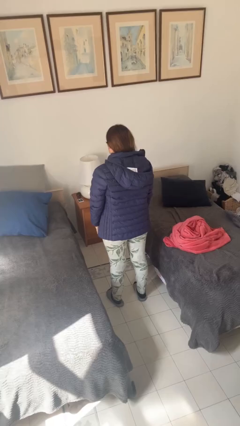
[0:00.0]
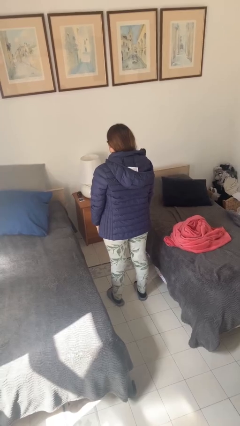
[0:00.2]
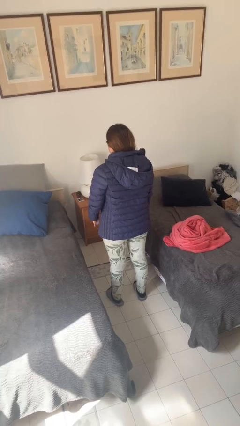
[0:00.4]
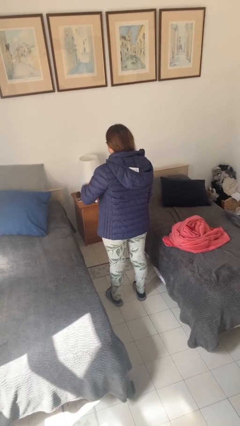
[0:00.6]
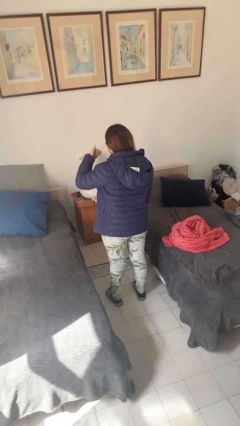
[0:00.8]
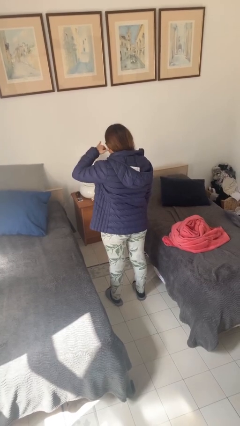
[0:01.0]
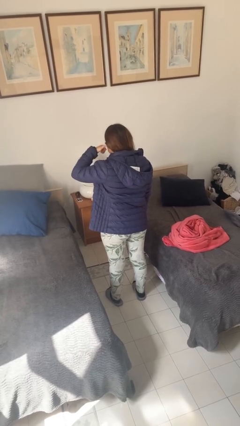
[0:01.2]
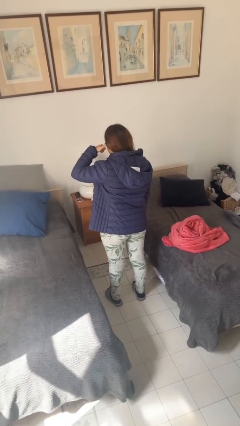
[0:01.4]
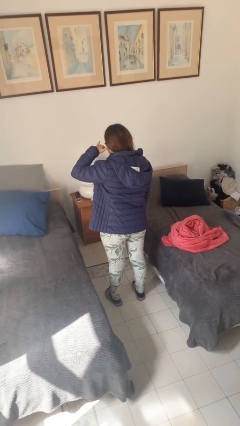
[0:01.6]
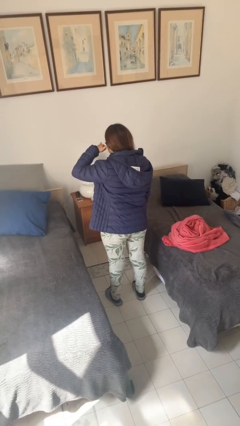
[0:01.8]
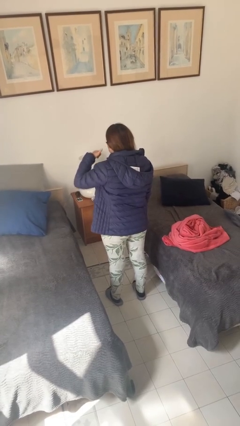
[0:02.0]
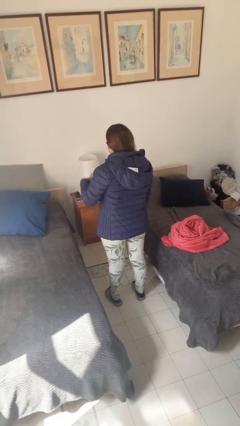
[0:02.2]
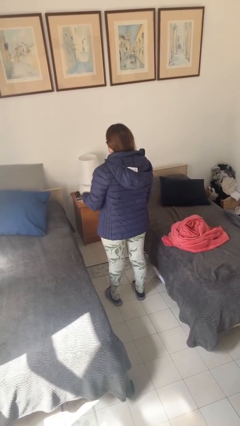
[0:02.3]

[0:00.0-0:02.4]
person gestures call me

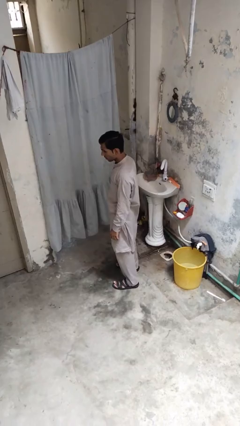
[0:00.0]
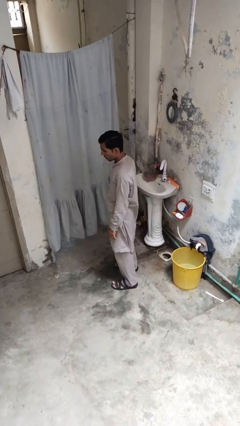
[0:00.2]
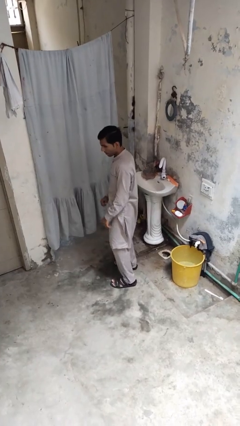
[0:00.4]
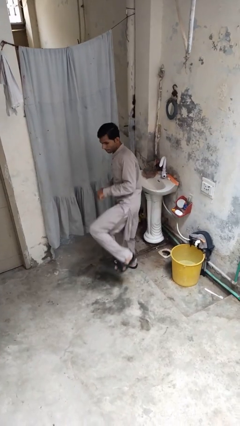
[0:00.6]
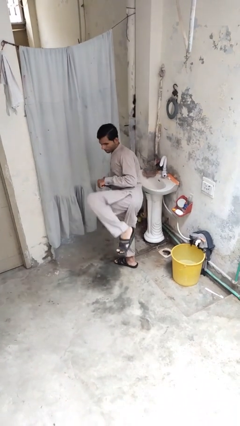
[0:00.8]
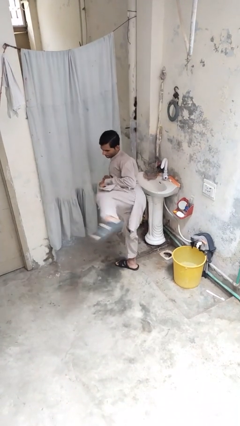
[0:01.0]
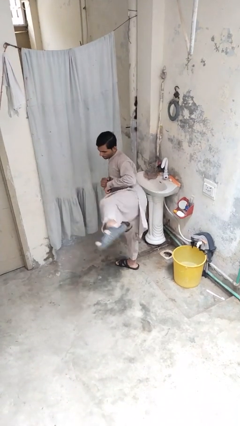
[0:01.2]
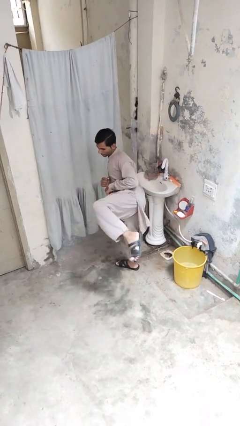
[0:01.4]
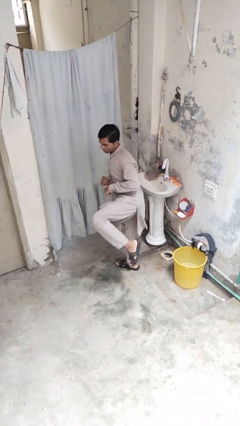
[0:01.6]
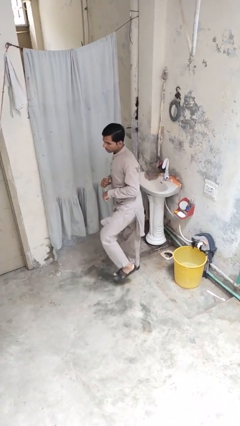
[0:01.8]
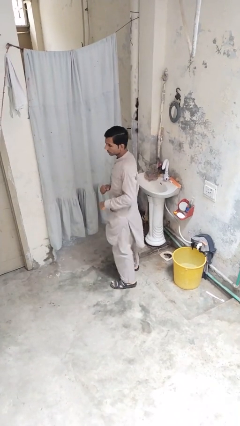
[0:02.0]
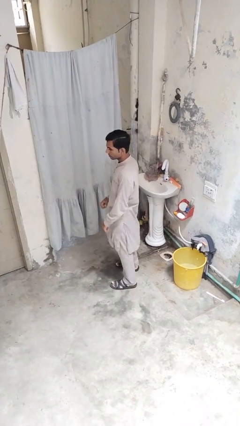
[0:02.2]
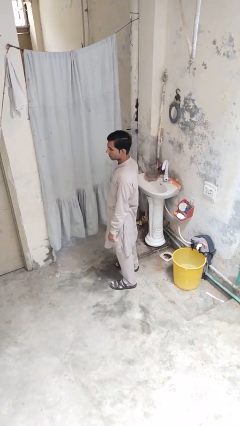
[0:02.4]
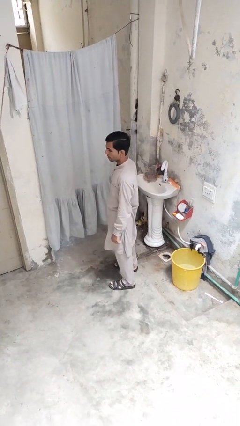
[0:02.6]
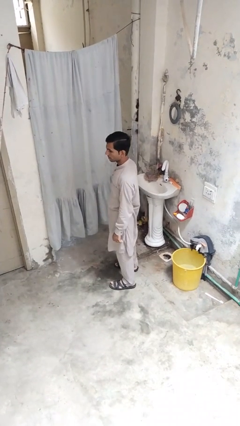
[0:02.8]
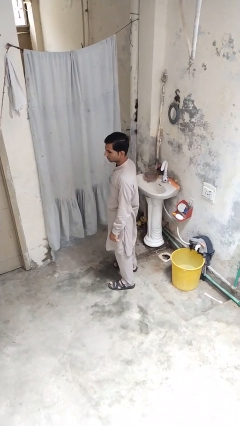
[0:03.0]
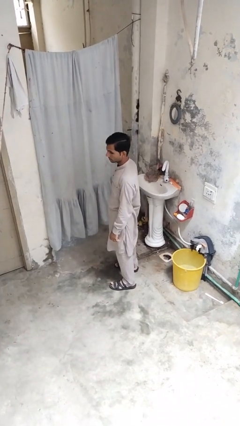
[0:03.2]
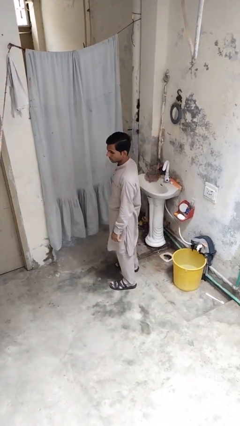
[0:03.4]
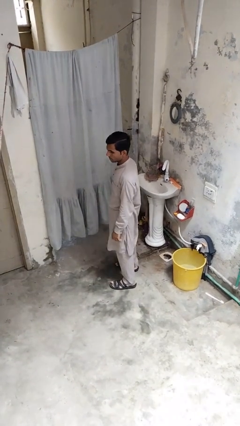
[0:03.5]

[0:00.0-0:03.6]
person karate kicks

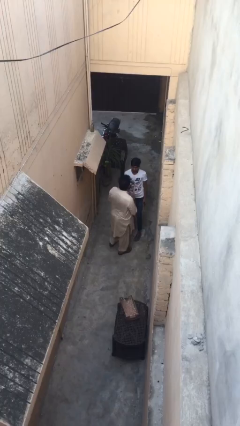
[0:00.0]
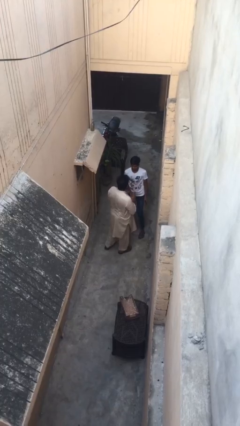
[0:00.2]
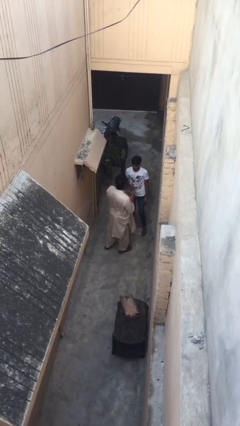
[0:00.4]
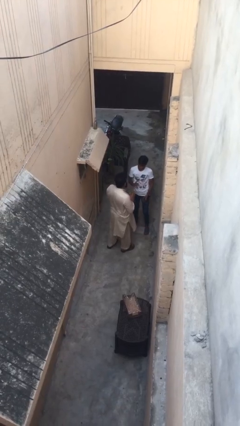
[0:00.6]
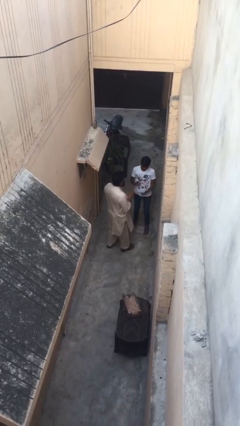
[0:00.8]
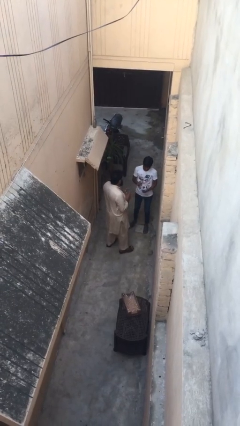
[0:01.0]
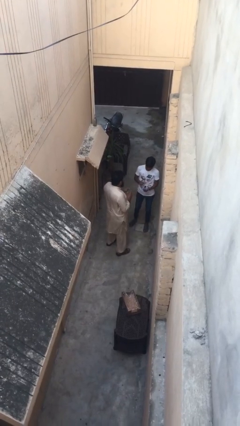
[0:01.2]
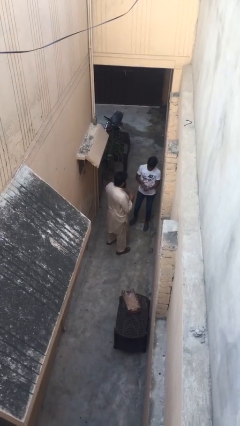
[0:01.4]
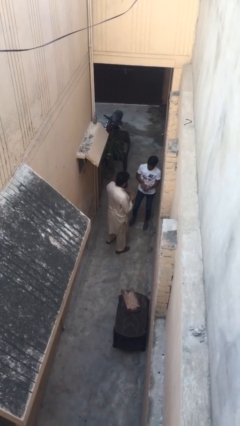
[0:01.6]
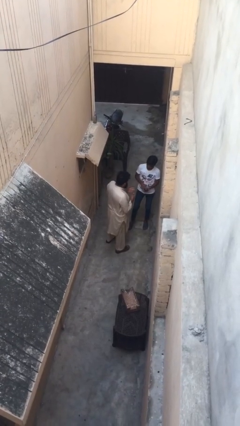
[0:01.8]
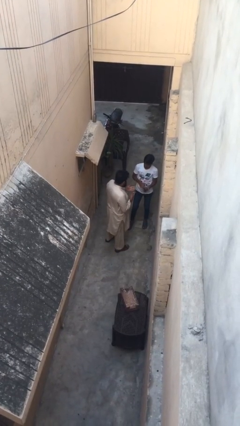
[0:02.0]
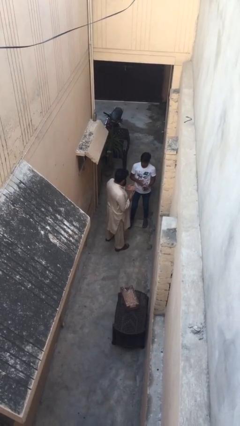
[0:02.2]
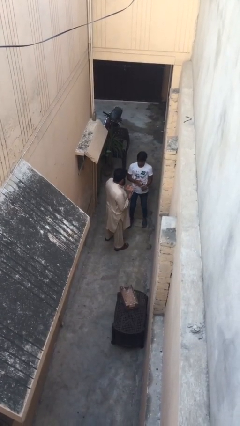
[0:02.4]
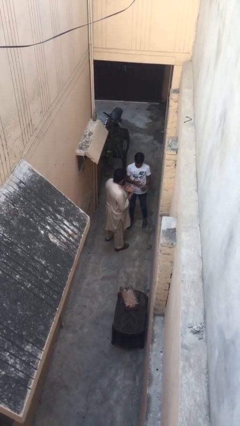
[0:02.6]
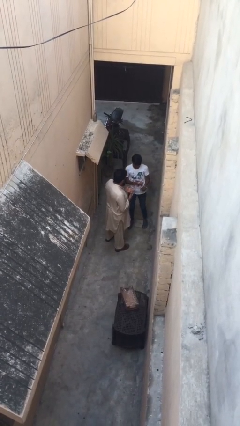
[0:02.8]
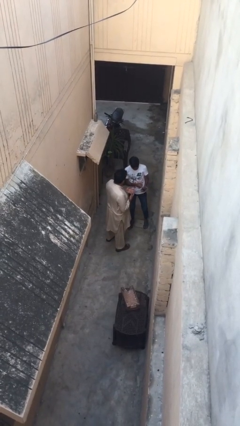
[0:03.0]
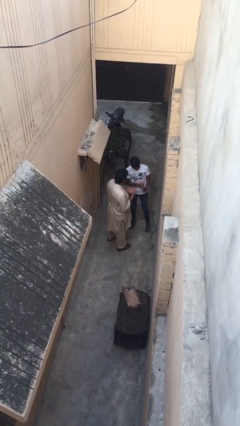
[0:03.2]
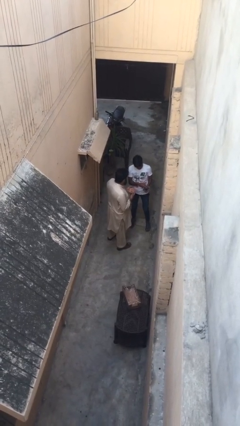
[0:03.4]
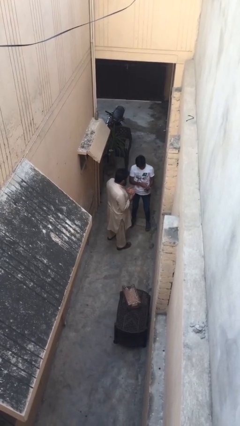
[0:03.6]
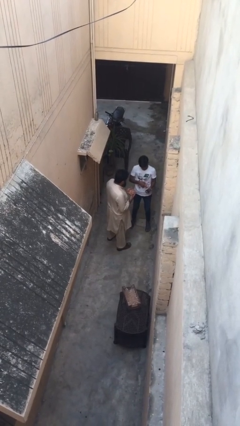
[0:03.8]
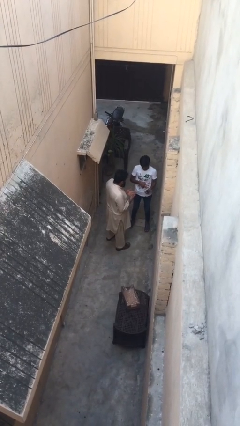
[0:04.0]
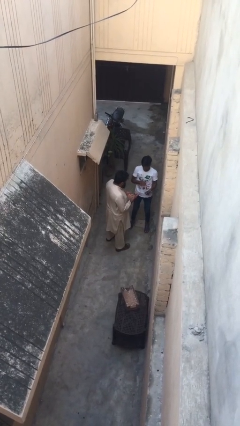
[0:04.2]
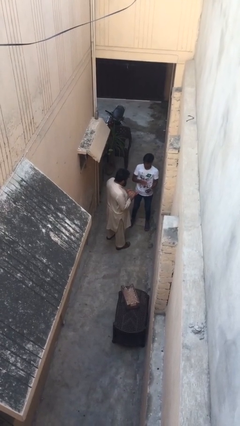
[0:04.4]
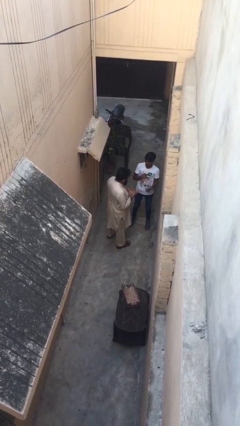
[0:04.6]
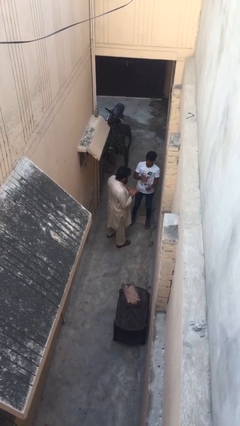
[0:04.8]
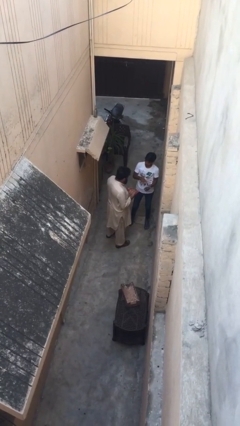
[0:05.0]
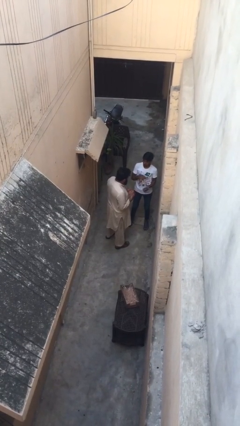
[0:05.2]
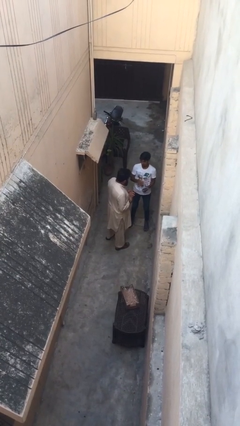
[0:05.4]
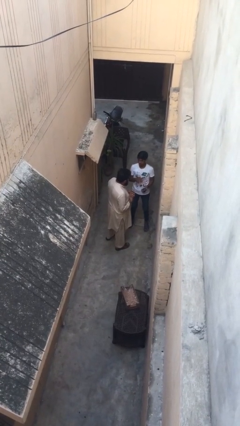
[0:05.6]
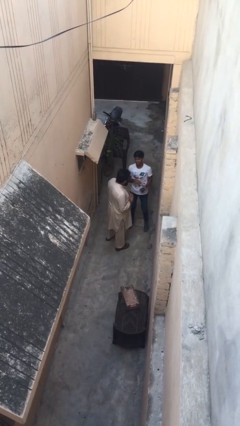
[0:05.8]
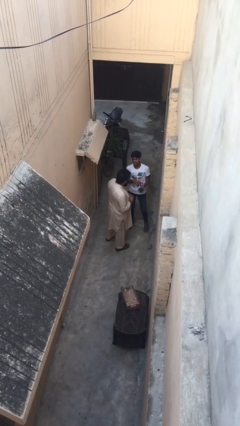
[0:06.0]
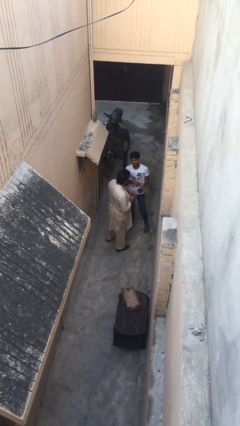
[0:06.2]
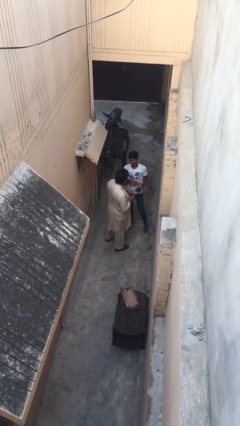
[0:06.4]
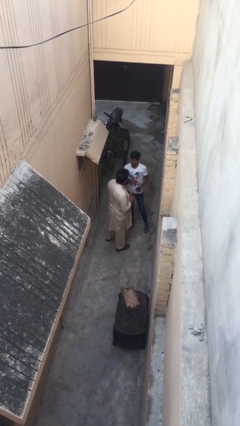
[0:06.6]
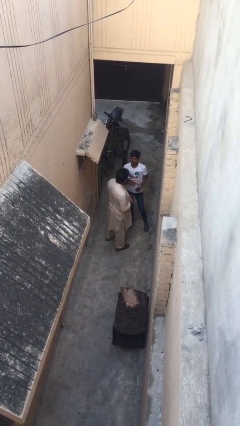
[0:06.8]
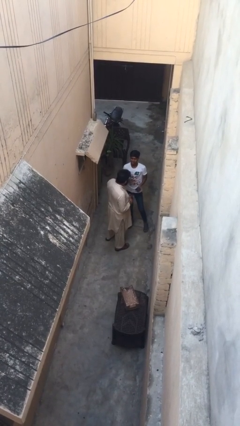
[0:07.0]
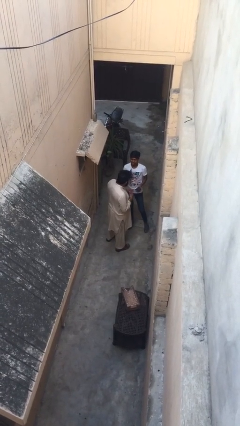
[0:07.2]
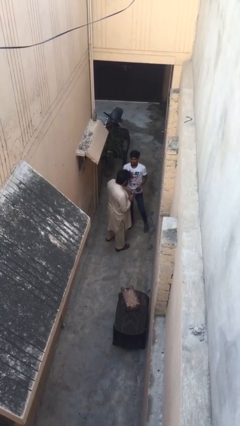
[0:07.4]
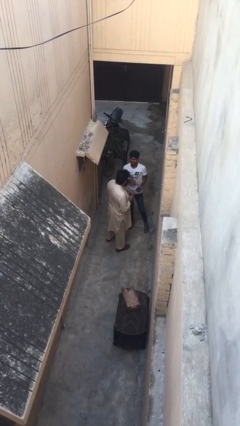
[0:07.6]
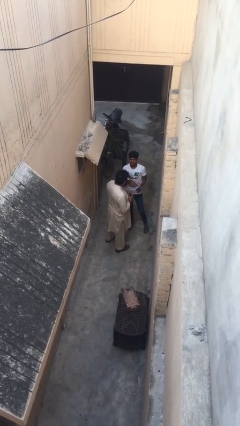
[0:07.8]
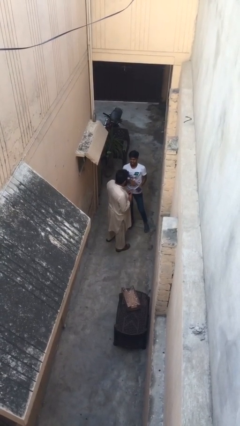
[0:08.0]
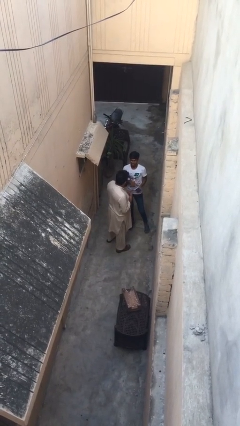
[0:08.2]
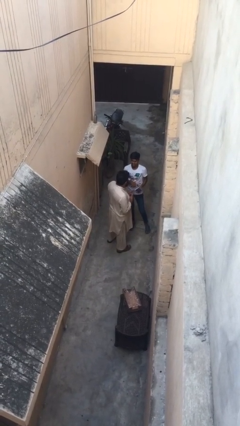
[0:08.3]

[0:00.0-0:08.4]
person talks to person

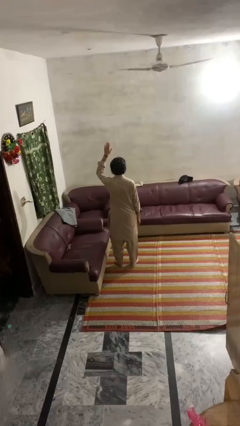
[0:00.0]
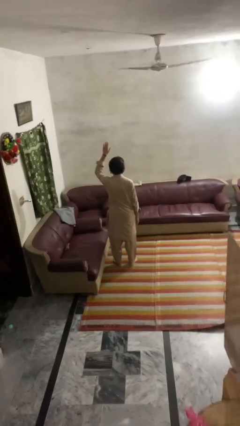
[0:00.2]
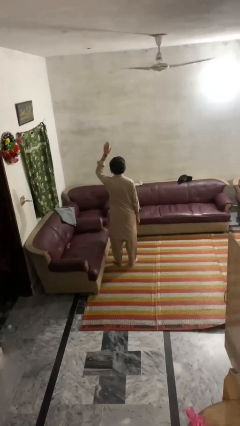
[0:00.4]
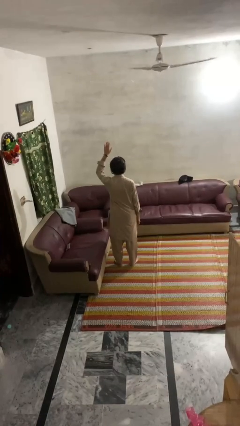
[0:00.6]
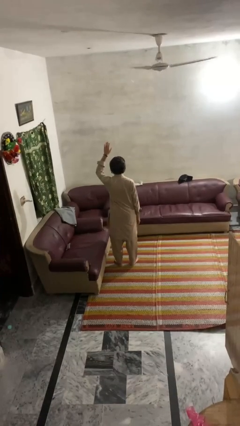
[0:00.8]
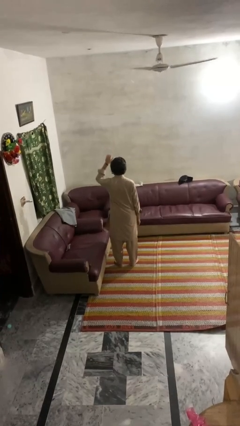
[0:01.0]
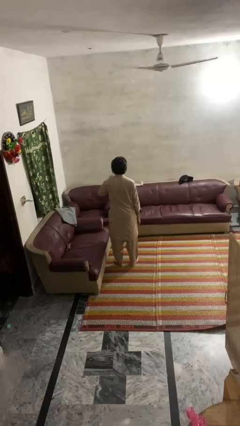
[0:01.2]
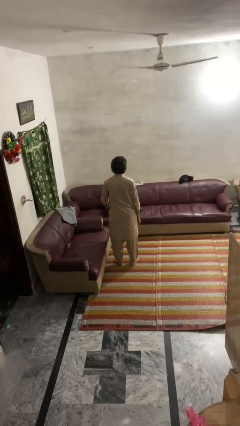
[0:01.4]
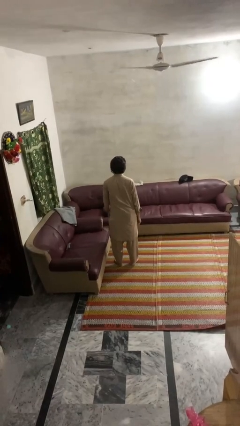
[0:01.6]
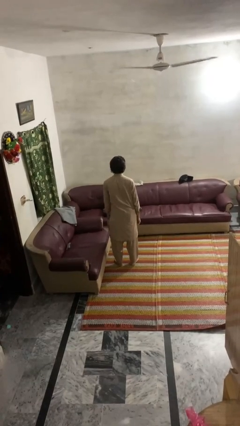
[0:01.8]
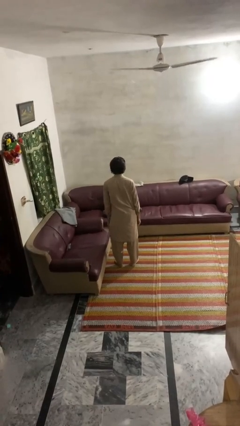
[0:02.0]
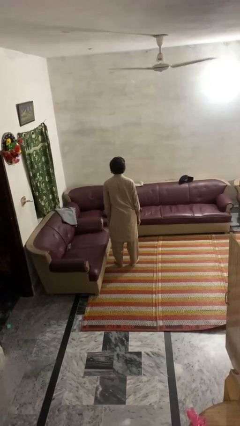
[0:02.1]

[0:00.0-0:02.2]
person gestures lower hand

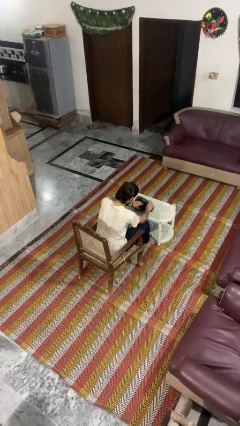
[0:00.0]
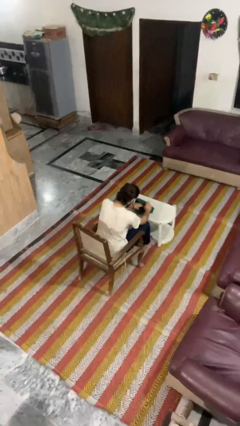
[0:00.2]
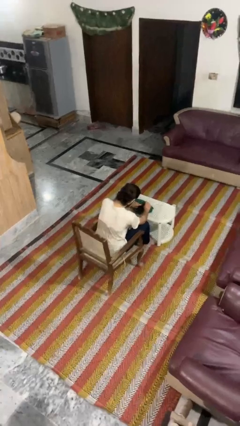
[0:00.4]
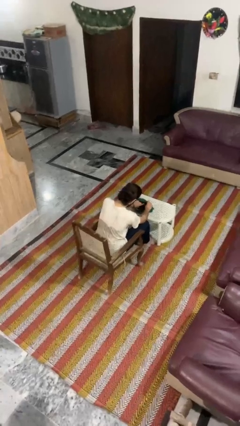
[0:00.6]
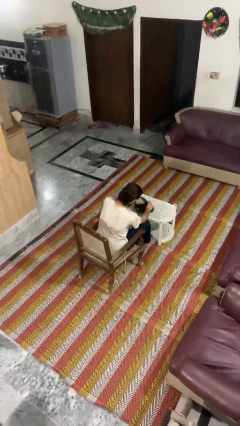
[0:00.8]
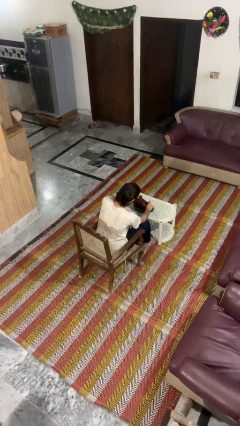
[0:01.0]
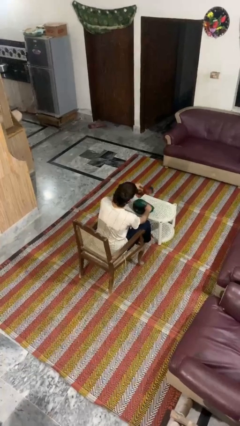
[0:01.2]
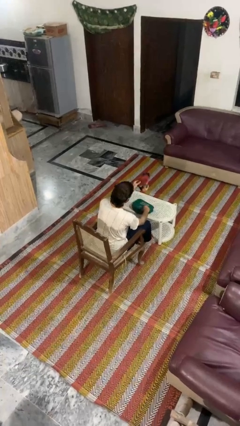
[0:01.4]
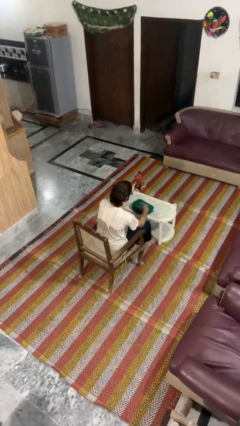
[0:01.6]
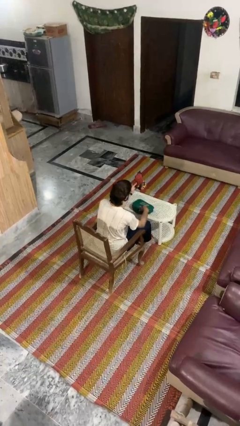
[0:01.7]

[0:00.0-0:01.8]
person takes object from purse
